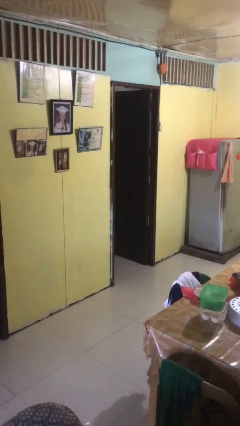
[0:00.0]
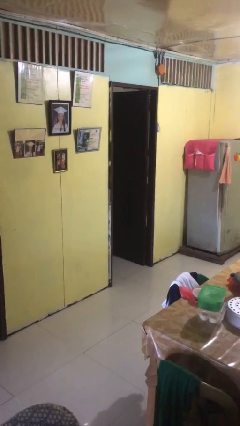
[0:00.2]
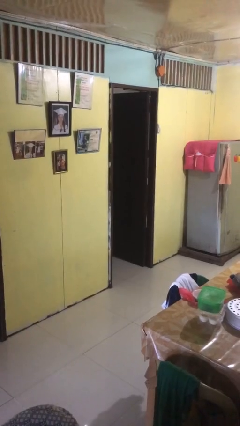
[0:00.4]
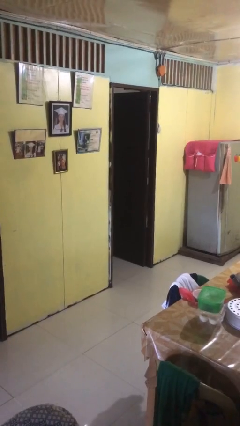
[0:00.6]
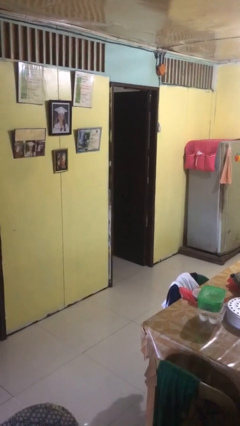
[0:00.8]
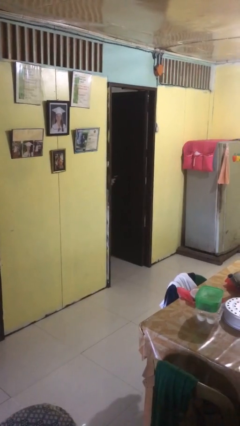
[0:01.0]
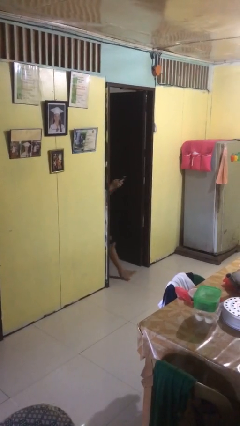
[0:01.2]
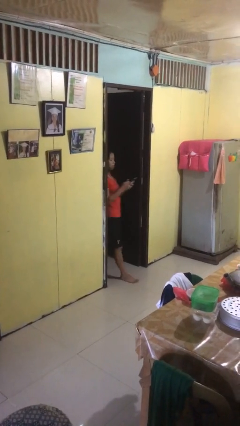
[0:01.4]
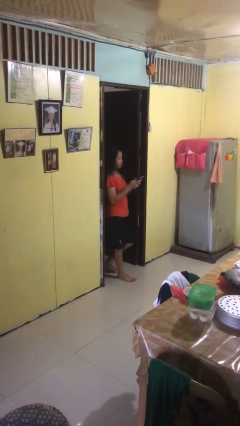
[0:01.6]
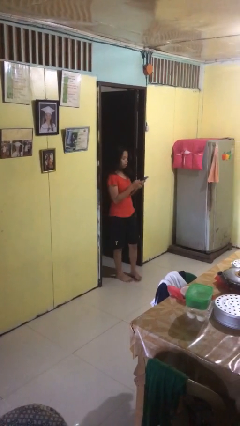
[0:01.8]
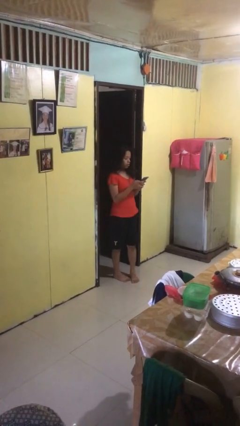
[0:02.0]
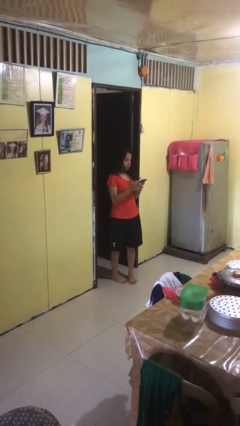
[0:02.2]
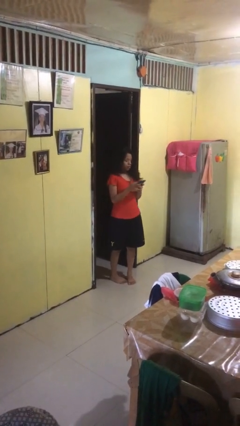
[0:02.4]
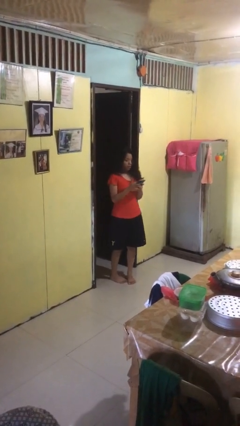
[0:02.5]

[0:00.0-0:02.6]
person enters scene through structure

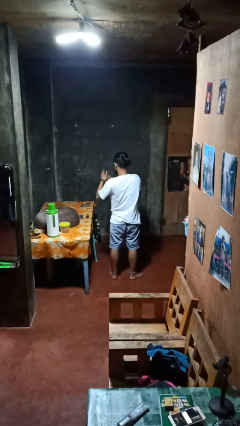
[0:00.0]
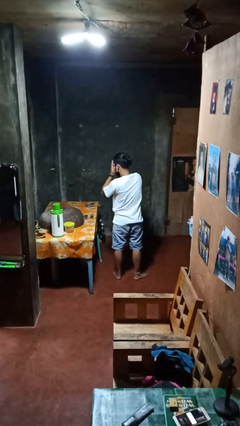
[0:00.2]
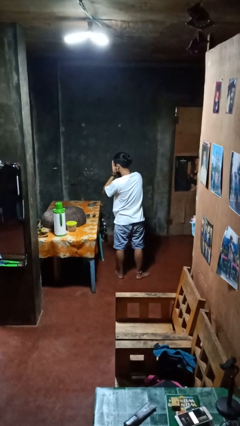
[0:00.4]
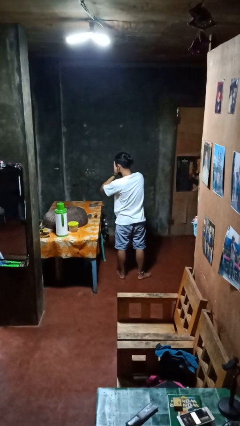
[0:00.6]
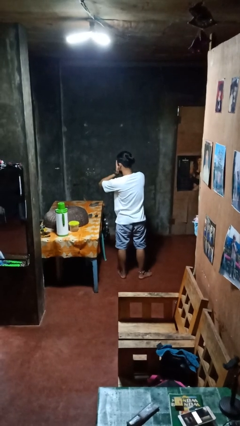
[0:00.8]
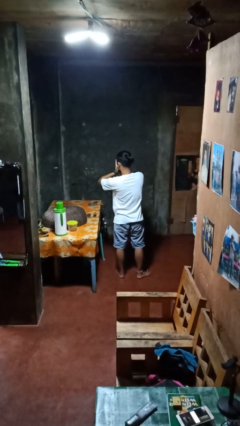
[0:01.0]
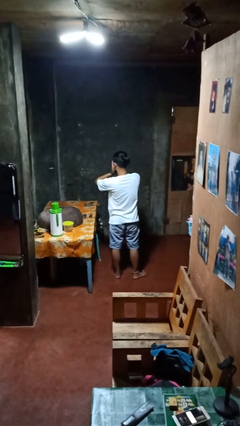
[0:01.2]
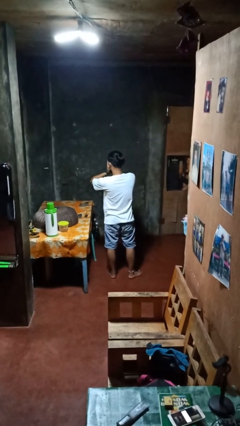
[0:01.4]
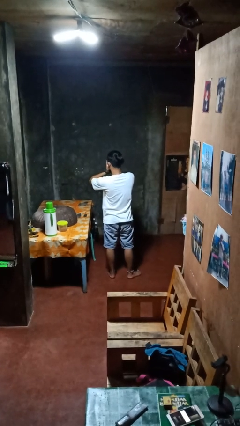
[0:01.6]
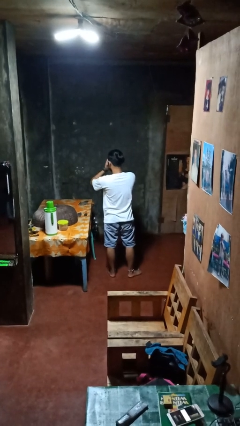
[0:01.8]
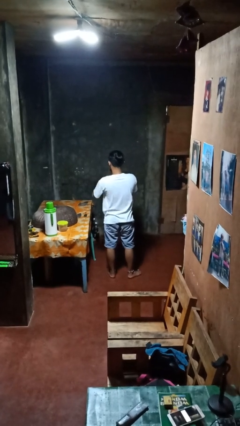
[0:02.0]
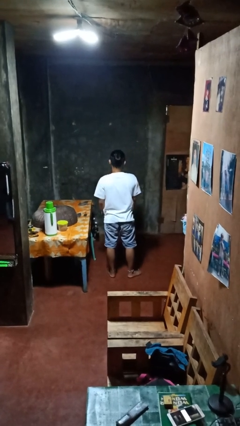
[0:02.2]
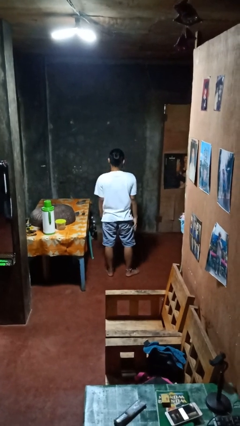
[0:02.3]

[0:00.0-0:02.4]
person covers face with hands

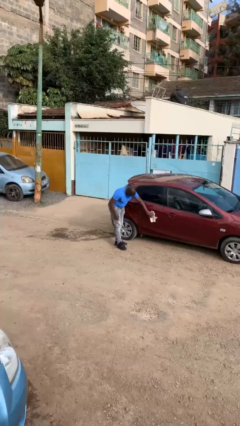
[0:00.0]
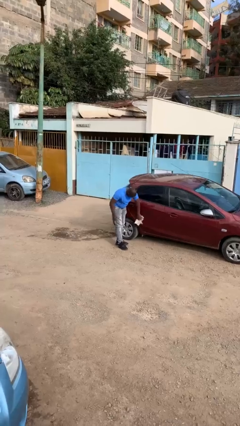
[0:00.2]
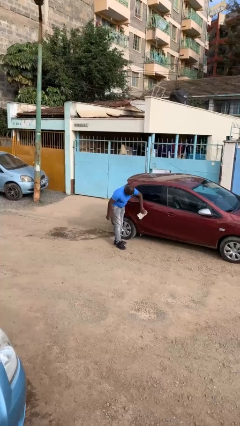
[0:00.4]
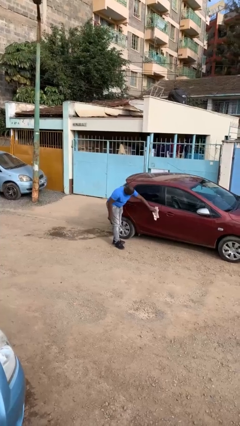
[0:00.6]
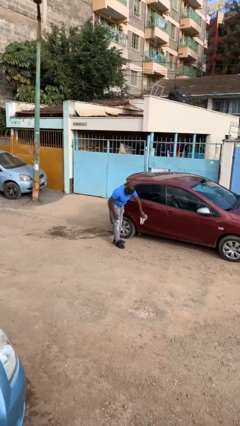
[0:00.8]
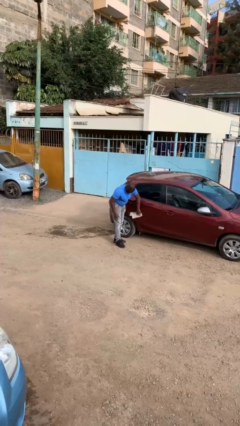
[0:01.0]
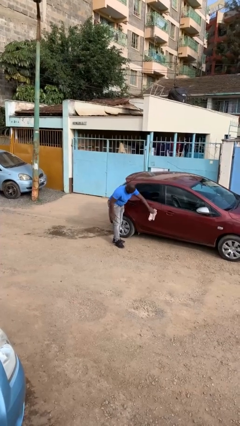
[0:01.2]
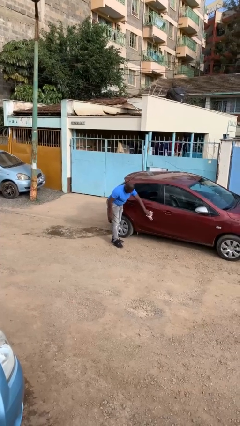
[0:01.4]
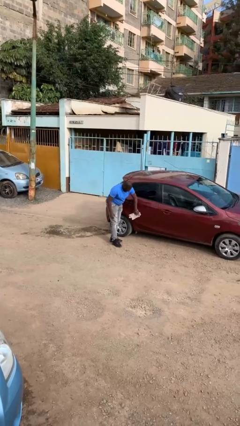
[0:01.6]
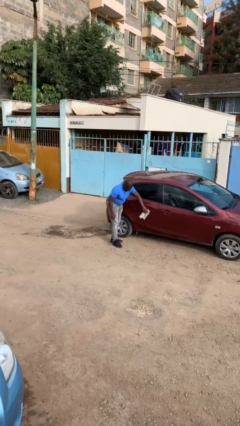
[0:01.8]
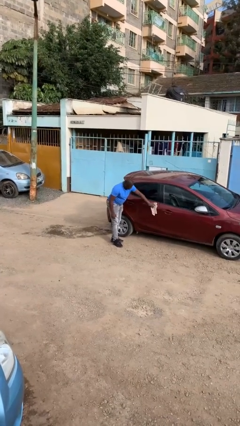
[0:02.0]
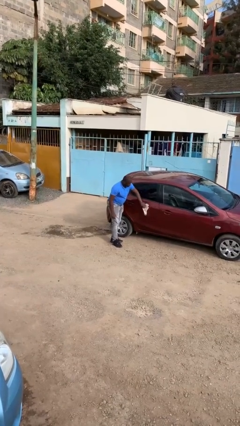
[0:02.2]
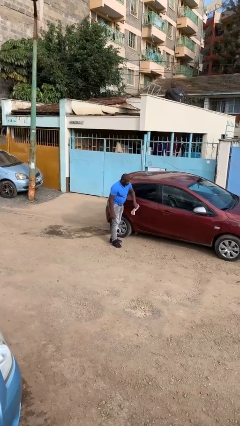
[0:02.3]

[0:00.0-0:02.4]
person polishes car with rag

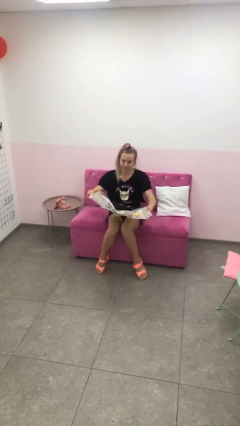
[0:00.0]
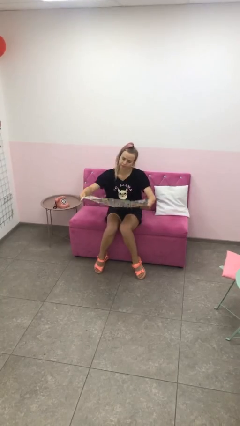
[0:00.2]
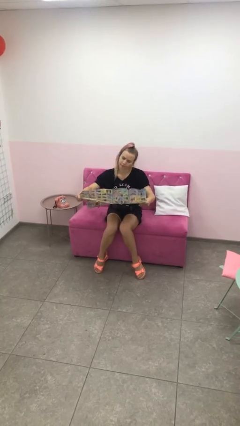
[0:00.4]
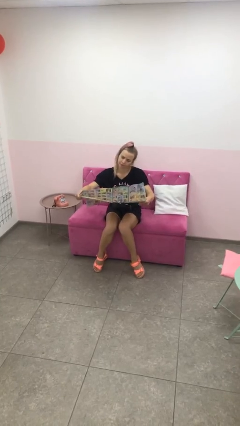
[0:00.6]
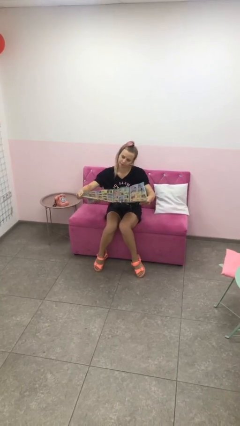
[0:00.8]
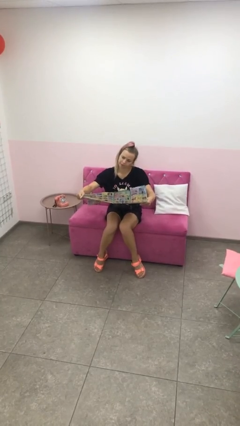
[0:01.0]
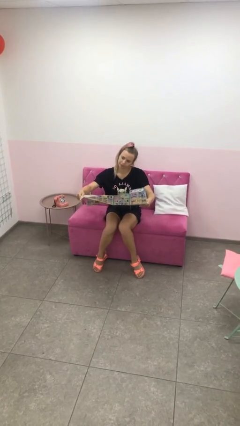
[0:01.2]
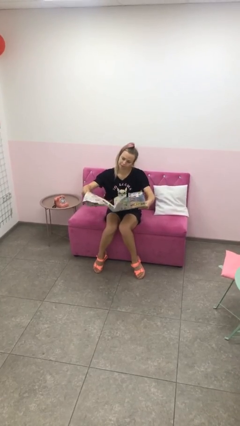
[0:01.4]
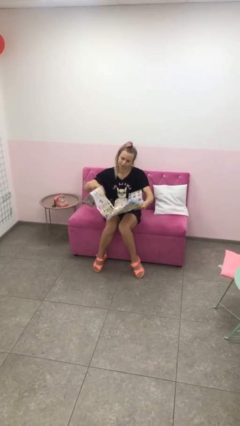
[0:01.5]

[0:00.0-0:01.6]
person reads newspaper

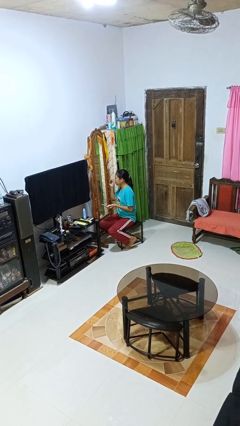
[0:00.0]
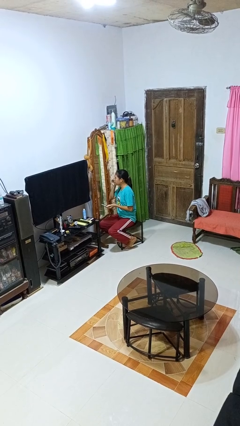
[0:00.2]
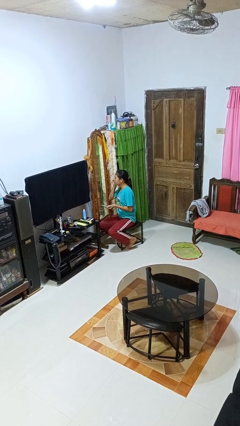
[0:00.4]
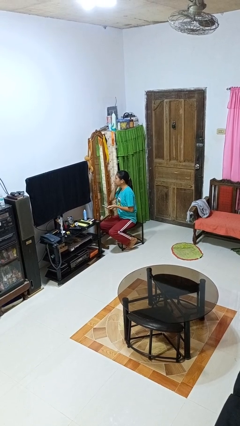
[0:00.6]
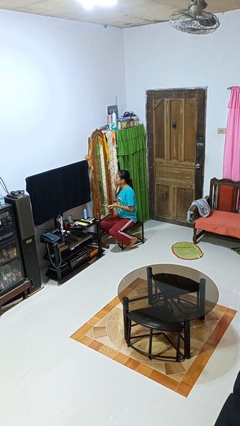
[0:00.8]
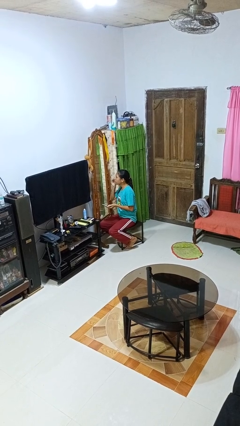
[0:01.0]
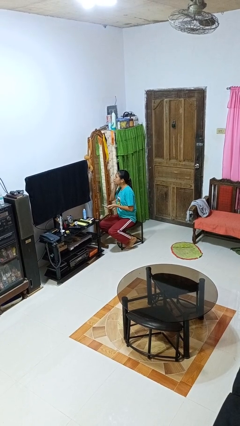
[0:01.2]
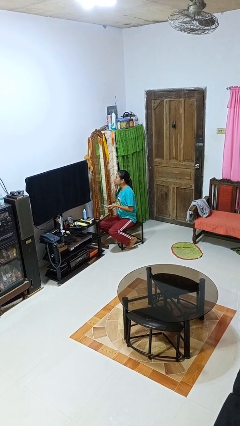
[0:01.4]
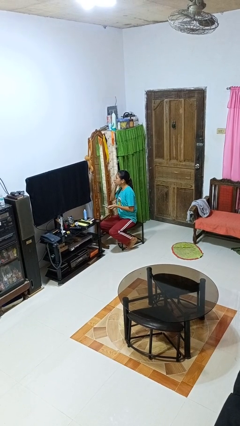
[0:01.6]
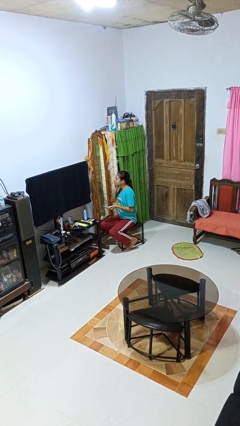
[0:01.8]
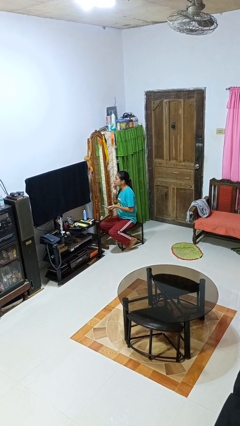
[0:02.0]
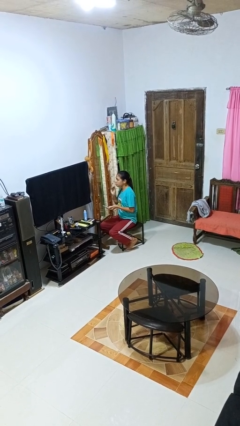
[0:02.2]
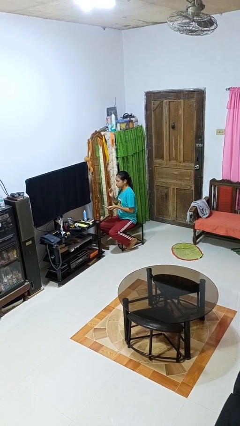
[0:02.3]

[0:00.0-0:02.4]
person applies foundation makeup

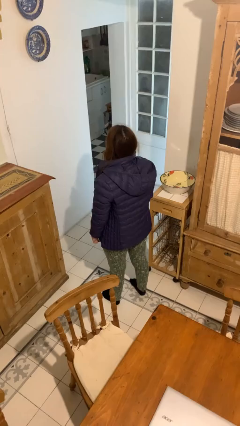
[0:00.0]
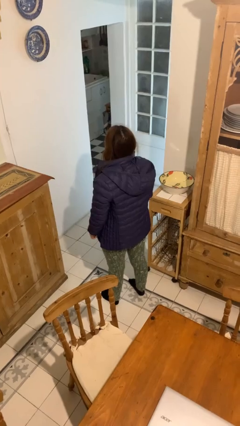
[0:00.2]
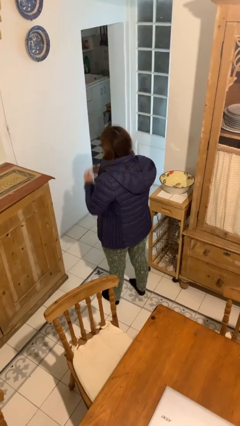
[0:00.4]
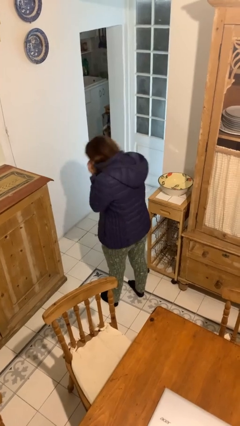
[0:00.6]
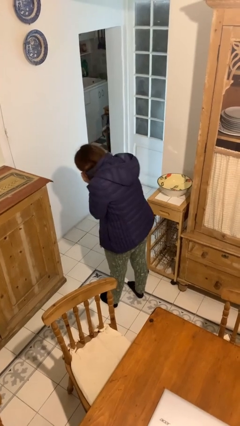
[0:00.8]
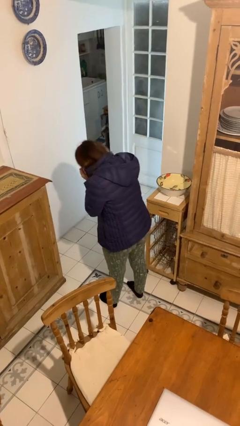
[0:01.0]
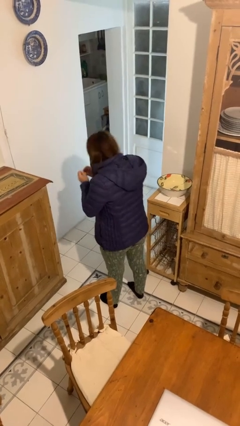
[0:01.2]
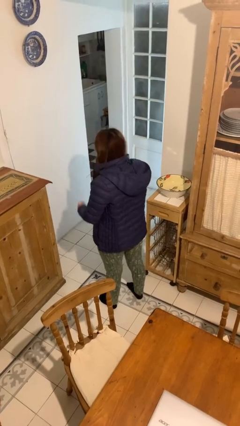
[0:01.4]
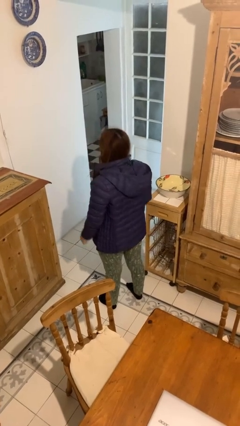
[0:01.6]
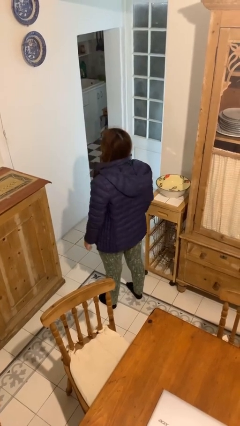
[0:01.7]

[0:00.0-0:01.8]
person sneezes into hand

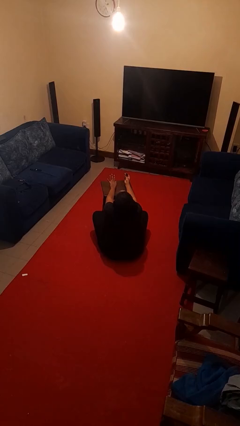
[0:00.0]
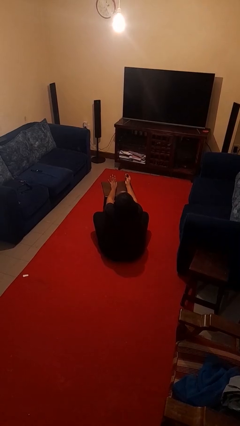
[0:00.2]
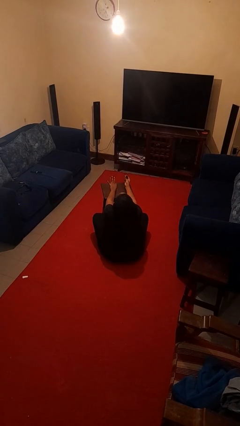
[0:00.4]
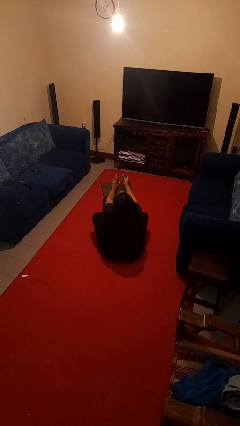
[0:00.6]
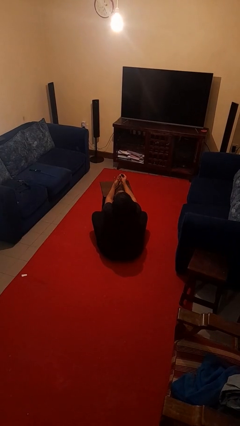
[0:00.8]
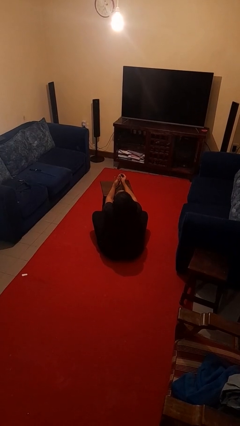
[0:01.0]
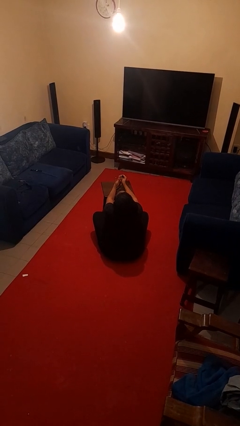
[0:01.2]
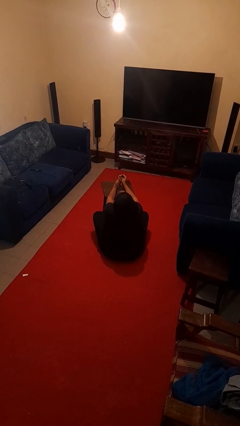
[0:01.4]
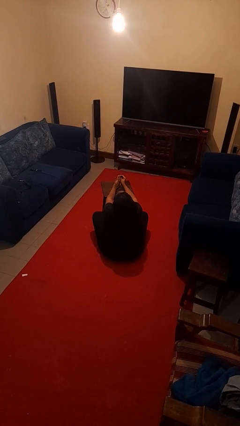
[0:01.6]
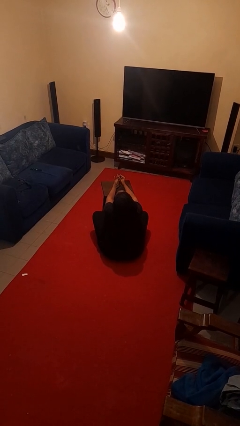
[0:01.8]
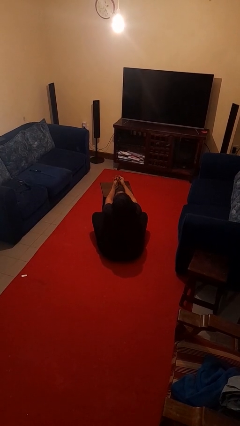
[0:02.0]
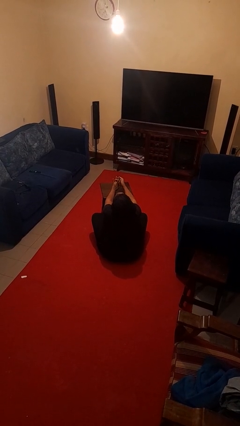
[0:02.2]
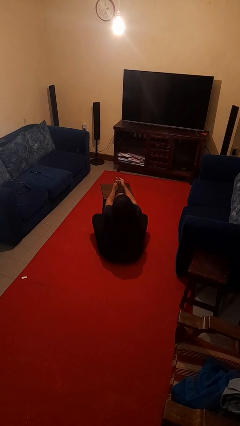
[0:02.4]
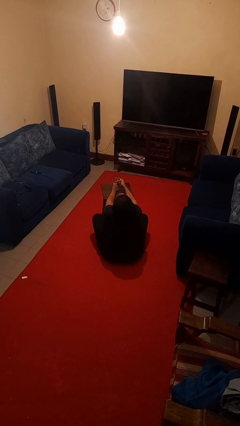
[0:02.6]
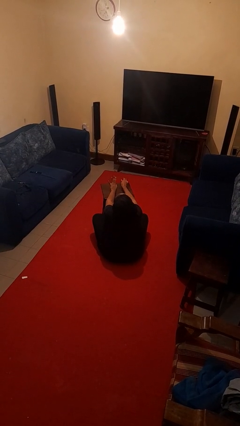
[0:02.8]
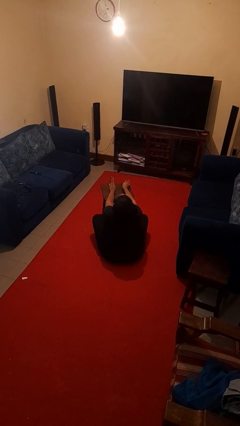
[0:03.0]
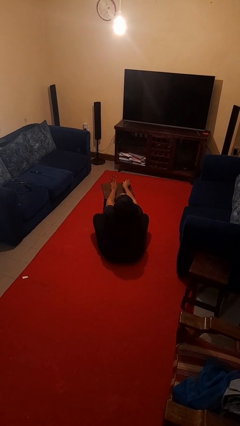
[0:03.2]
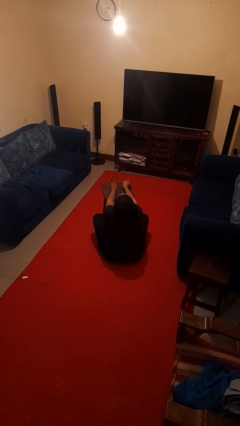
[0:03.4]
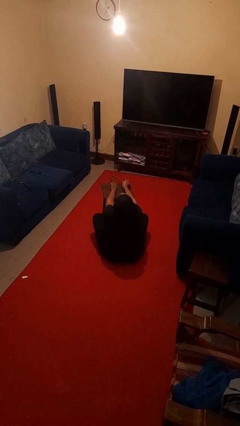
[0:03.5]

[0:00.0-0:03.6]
person puts on ring

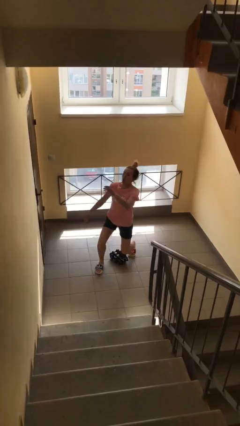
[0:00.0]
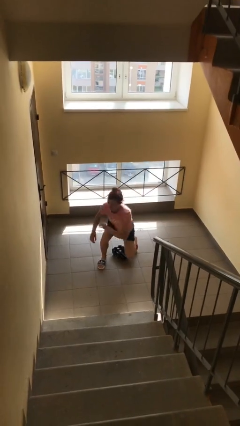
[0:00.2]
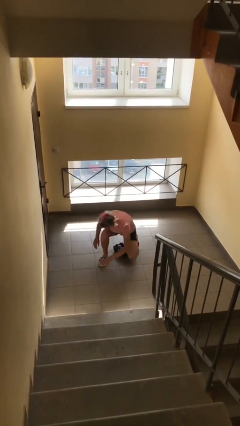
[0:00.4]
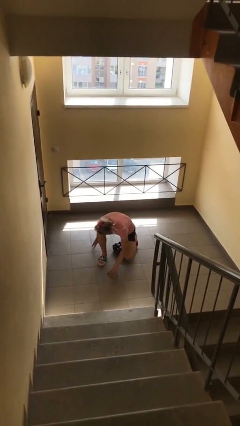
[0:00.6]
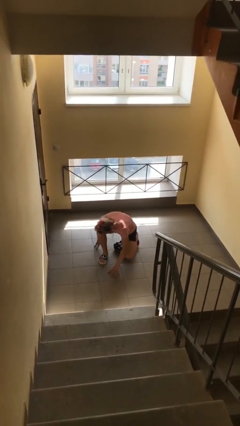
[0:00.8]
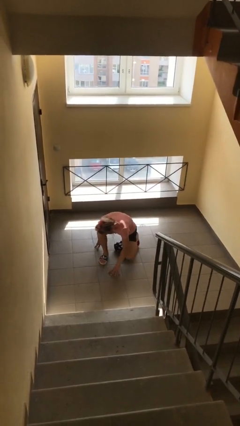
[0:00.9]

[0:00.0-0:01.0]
person trips on object on floor
